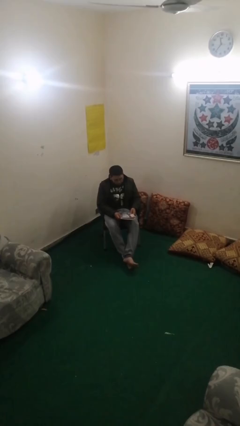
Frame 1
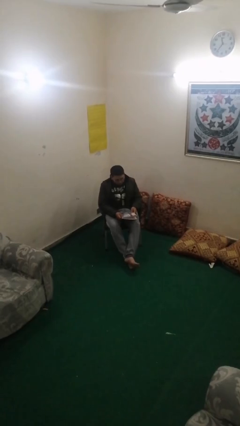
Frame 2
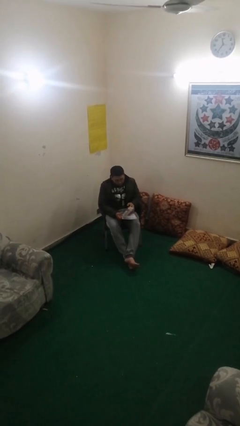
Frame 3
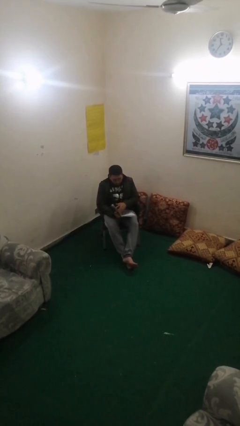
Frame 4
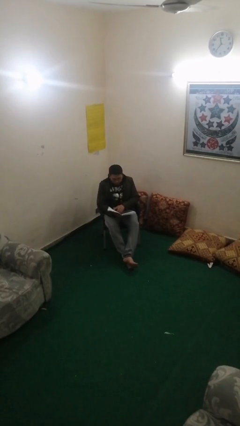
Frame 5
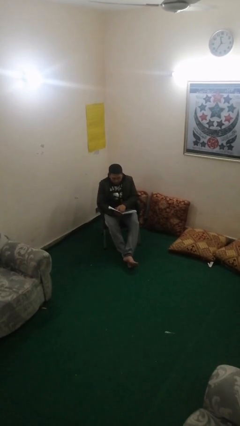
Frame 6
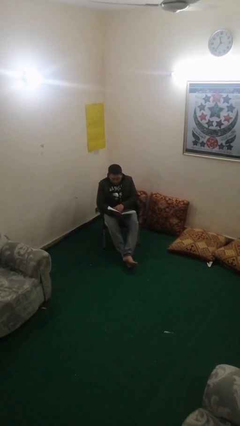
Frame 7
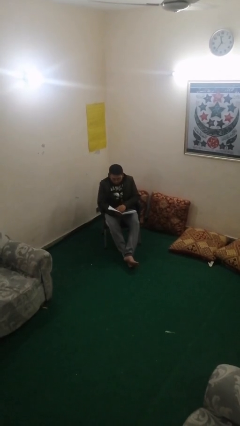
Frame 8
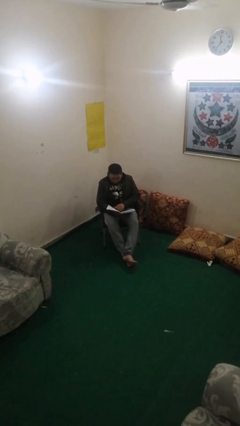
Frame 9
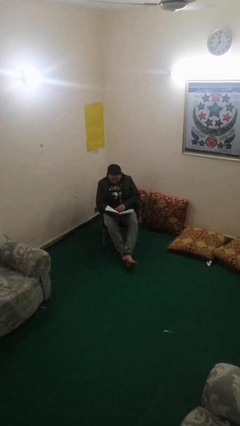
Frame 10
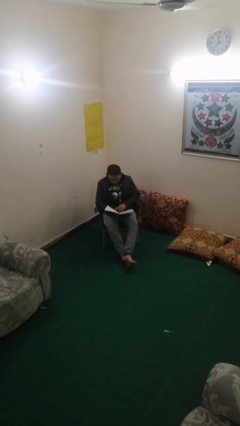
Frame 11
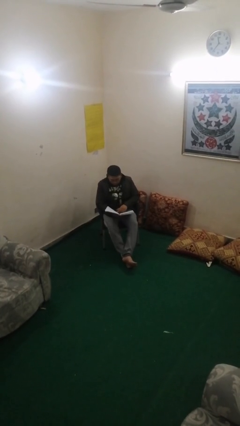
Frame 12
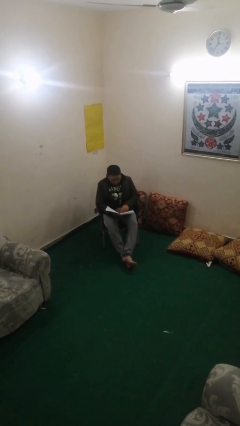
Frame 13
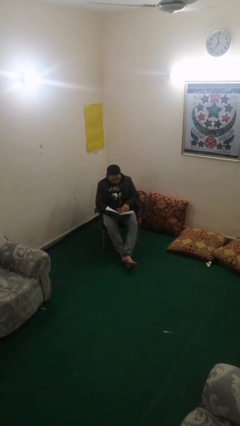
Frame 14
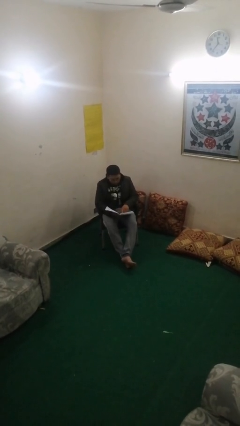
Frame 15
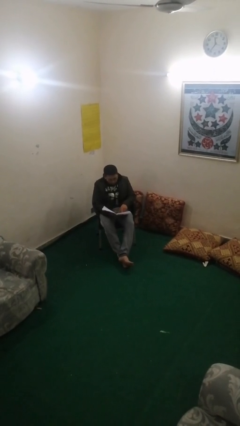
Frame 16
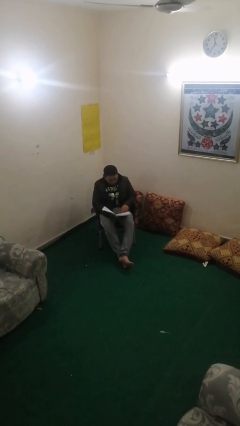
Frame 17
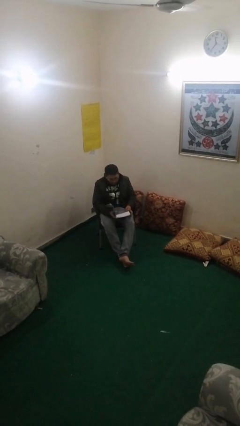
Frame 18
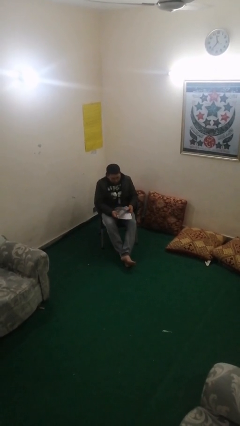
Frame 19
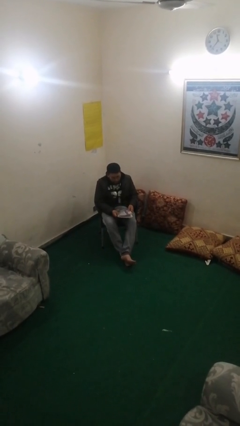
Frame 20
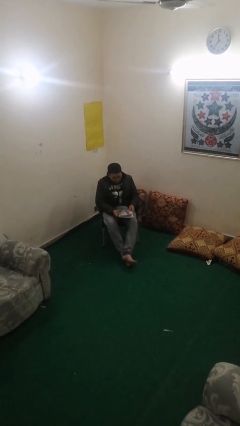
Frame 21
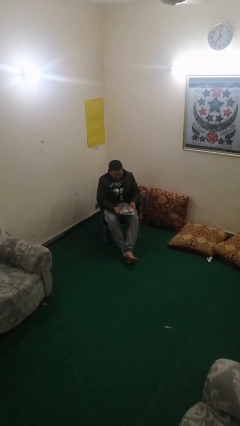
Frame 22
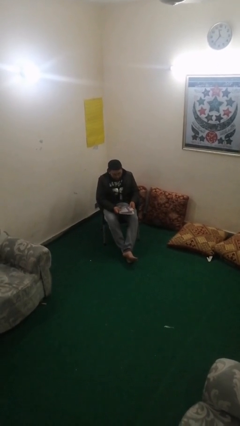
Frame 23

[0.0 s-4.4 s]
person reads document

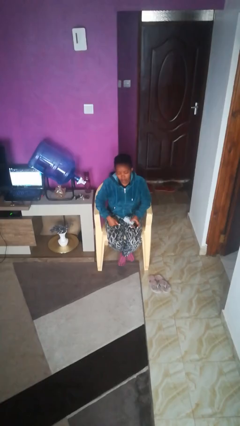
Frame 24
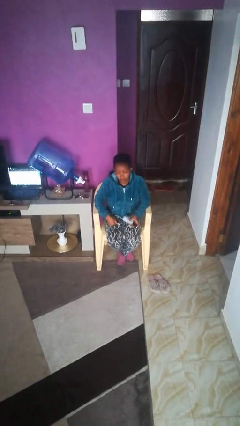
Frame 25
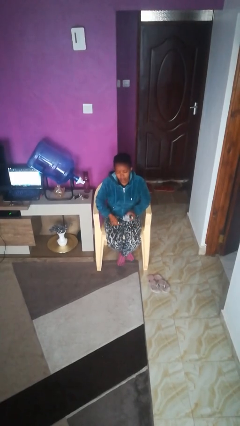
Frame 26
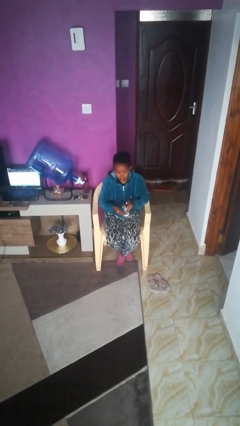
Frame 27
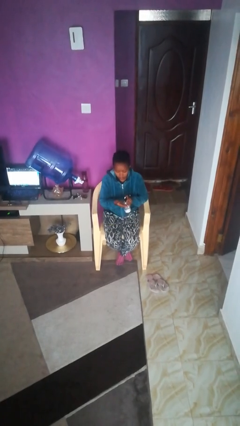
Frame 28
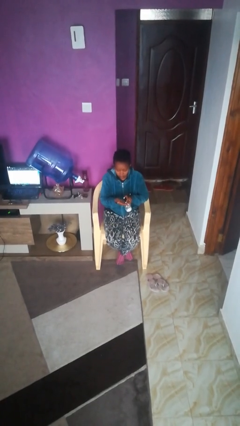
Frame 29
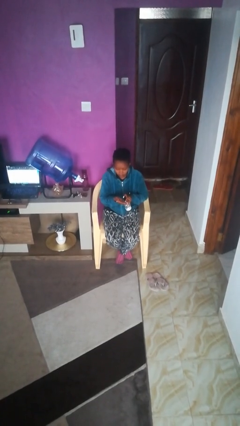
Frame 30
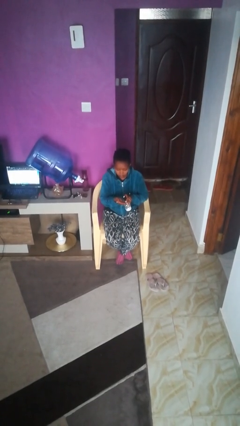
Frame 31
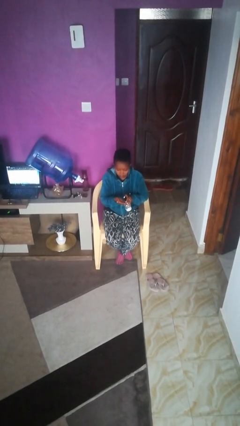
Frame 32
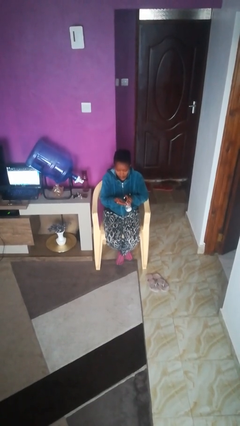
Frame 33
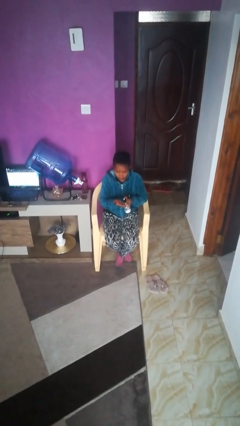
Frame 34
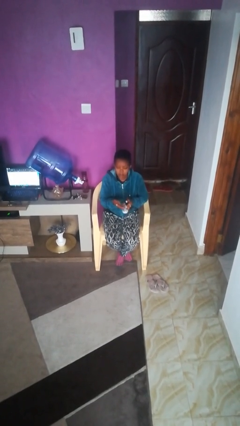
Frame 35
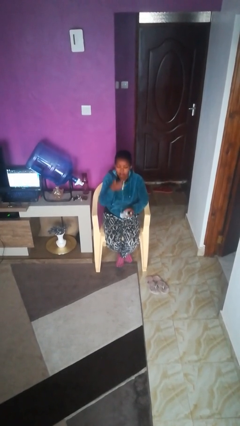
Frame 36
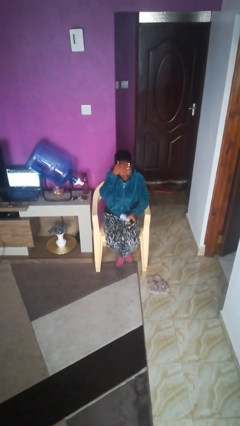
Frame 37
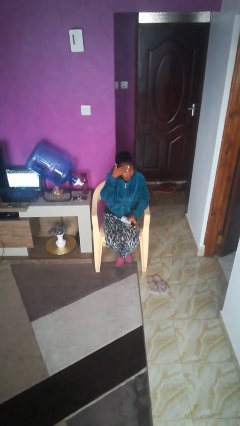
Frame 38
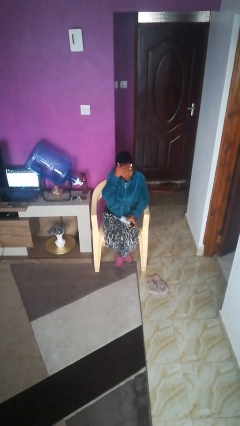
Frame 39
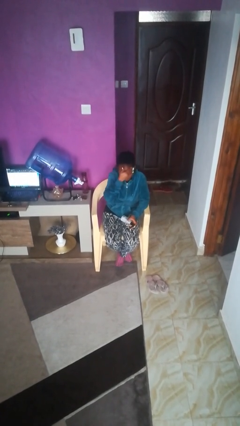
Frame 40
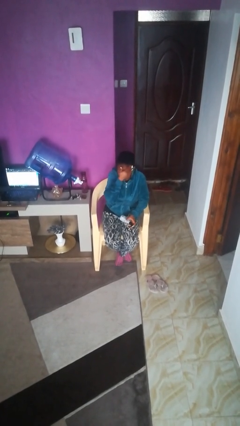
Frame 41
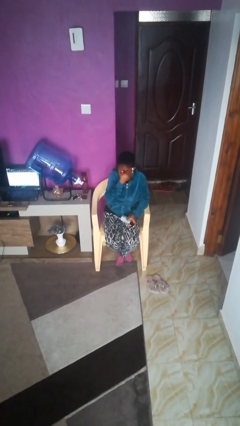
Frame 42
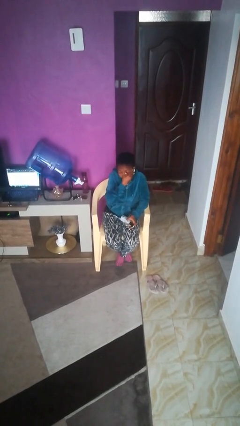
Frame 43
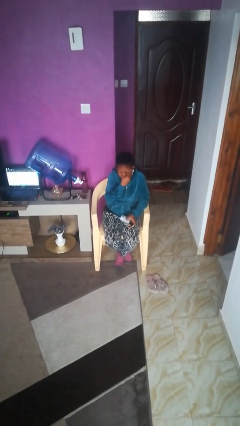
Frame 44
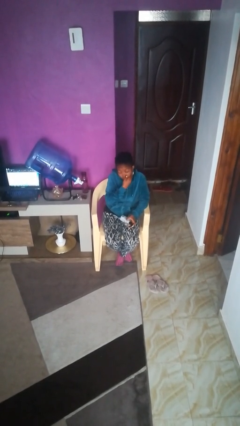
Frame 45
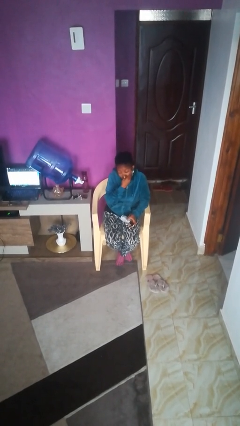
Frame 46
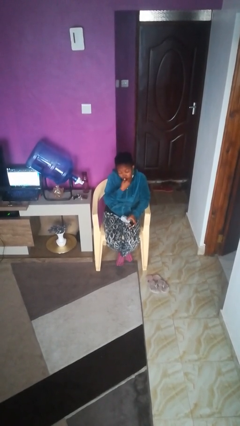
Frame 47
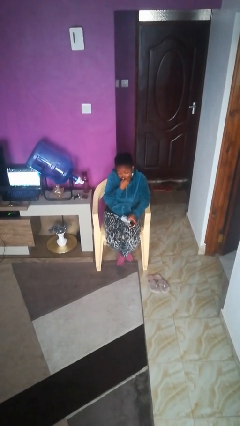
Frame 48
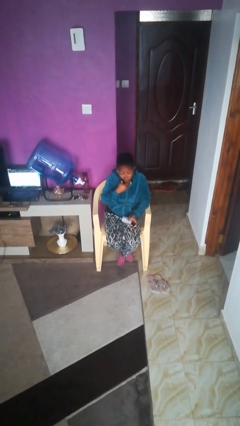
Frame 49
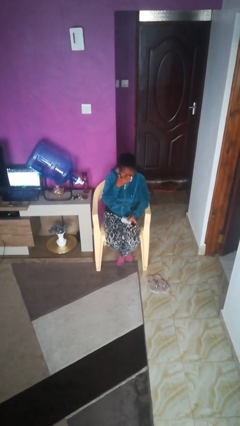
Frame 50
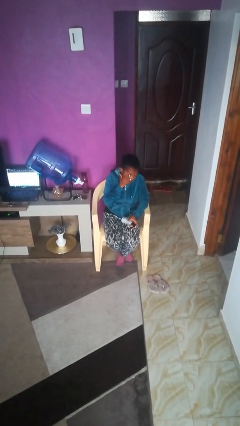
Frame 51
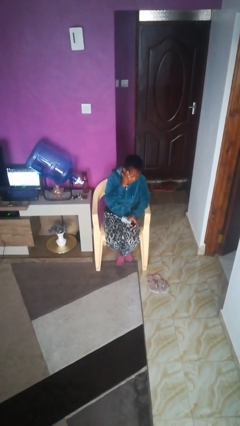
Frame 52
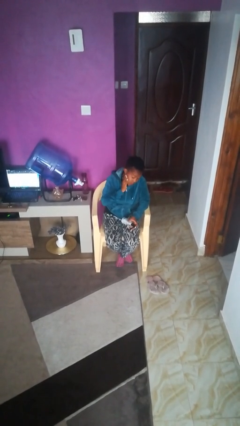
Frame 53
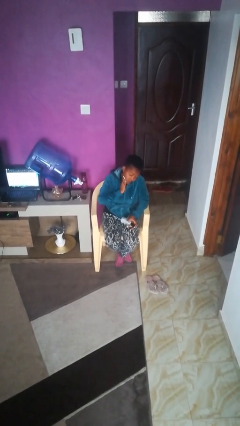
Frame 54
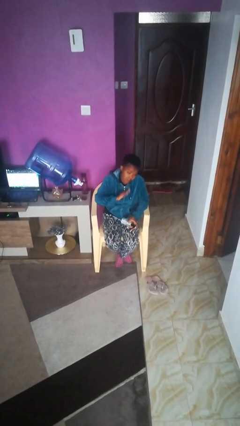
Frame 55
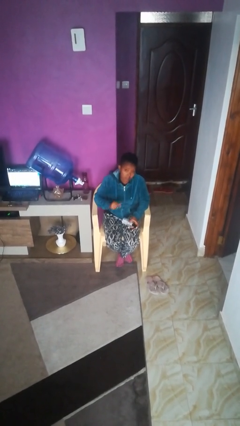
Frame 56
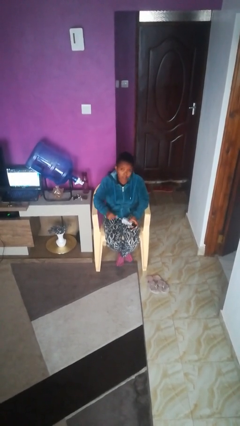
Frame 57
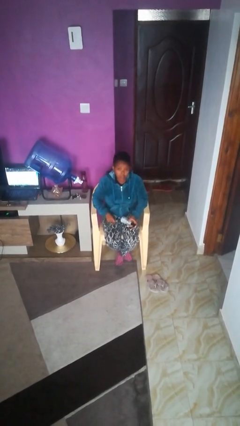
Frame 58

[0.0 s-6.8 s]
person applies facial moisturizer

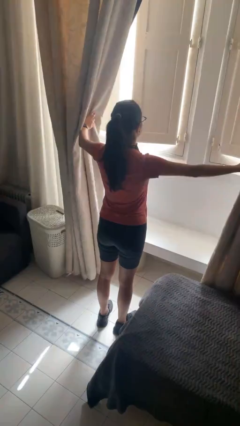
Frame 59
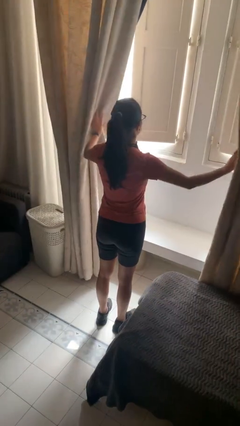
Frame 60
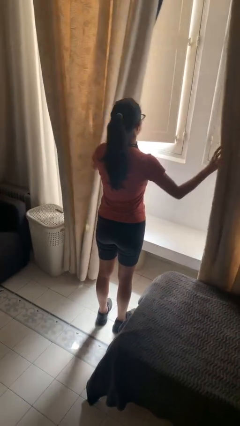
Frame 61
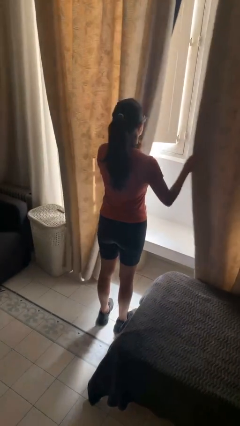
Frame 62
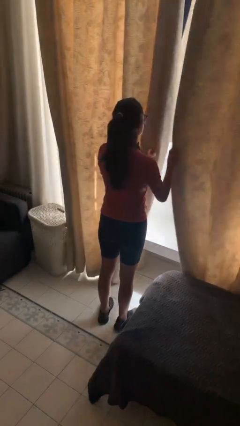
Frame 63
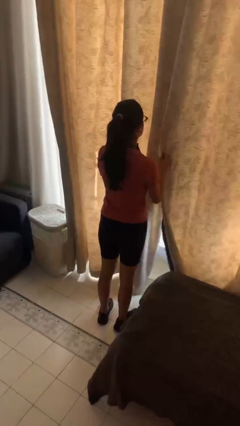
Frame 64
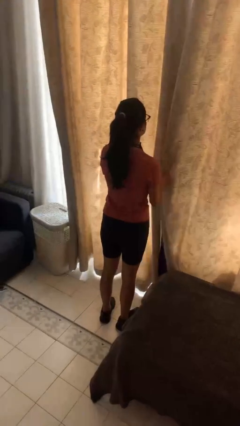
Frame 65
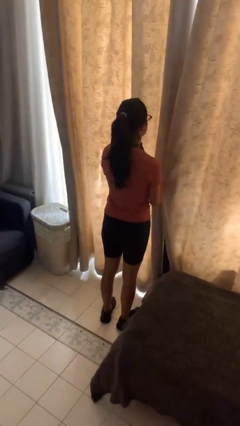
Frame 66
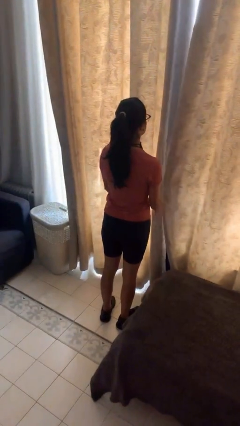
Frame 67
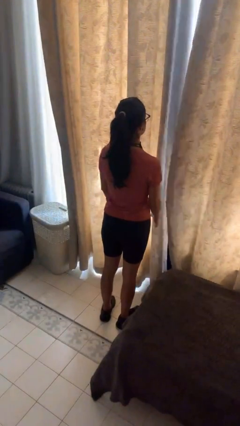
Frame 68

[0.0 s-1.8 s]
person closes curtains

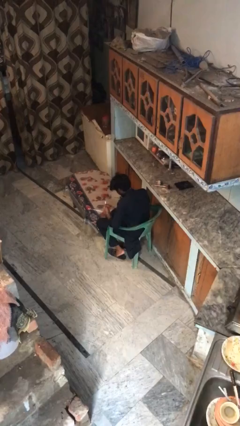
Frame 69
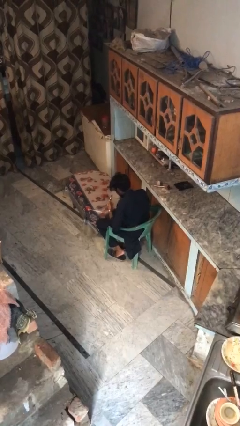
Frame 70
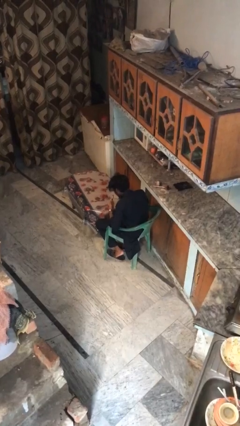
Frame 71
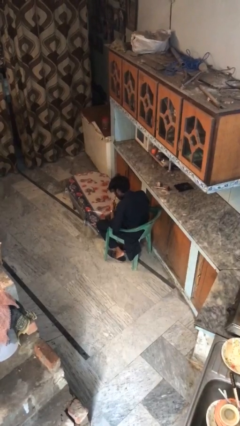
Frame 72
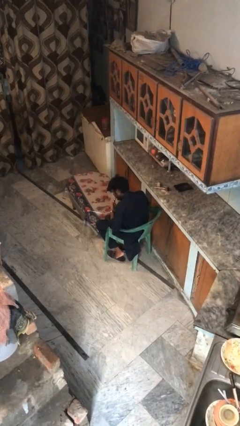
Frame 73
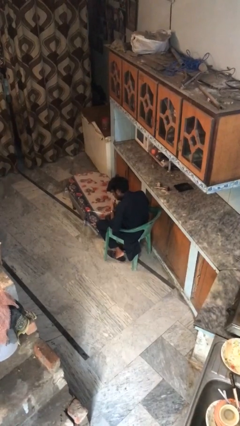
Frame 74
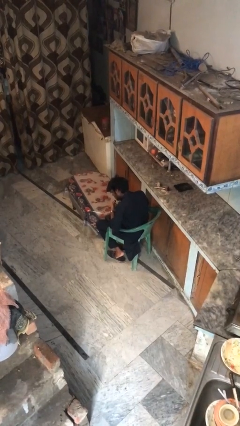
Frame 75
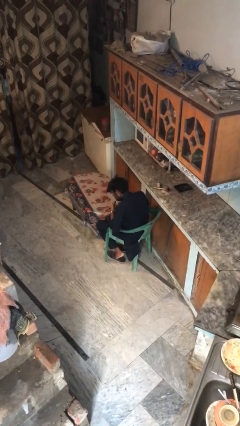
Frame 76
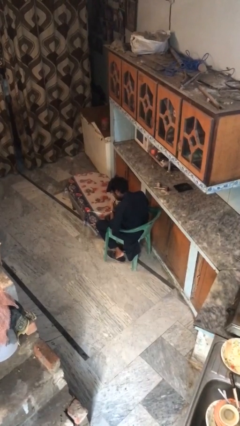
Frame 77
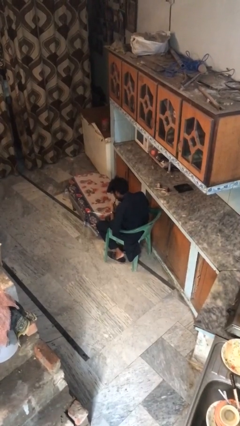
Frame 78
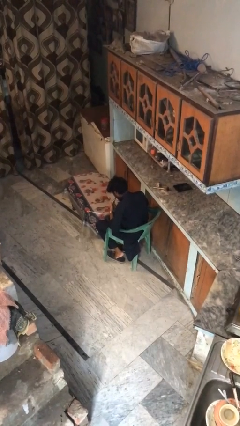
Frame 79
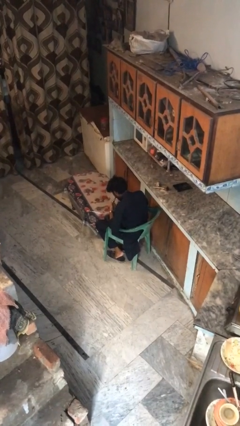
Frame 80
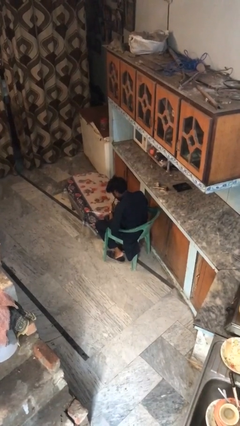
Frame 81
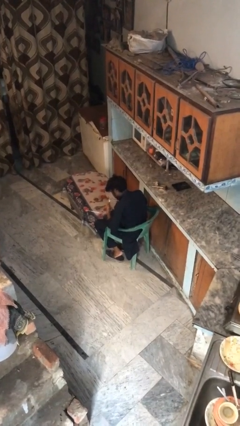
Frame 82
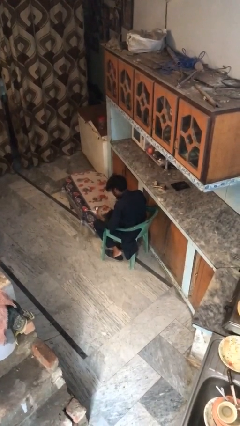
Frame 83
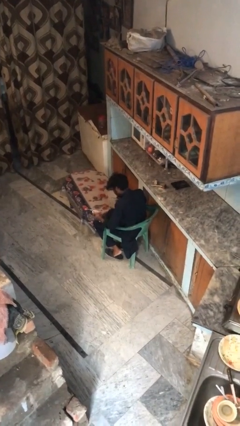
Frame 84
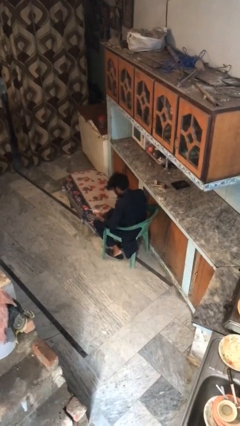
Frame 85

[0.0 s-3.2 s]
person applies lip makeup

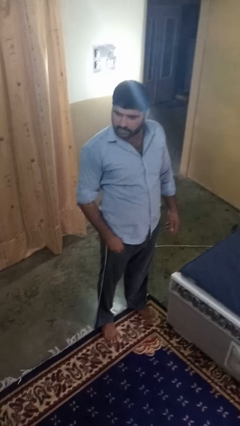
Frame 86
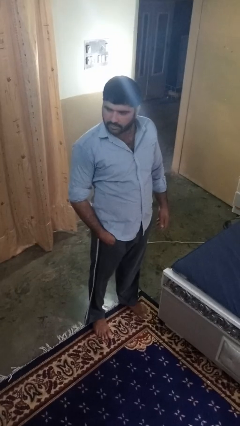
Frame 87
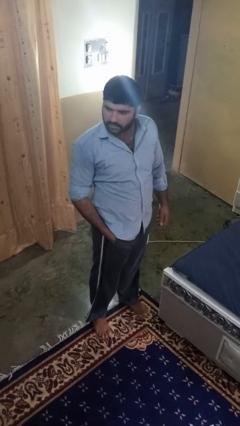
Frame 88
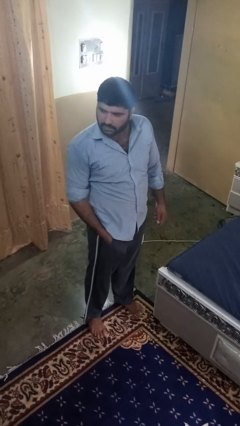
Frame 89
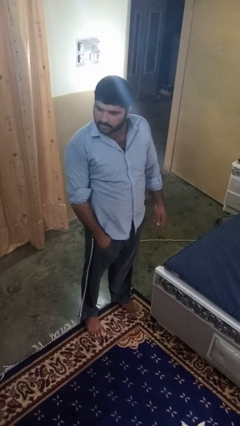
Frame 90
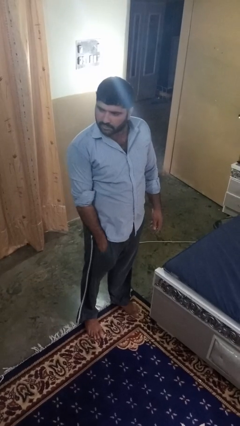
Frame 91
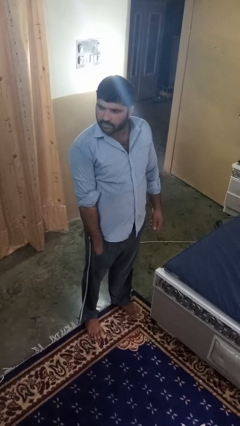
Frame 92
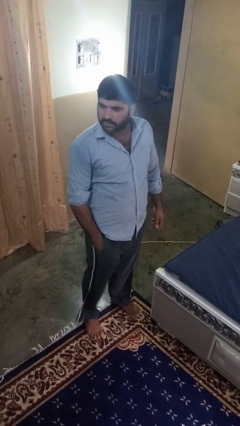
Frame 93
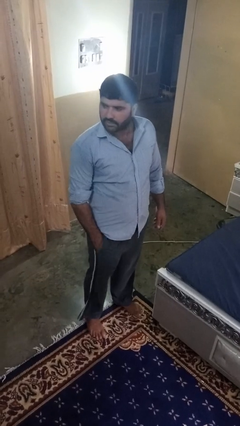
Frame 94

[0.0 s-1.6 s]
person puts hands in back pockets
